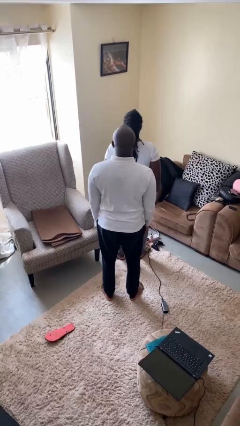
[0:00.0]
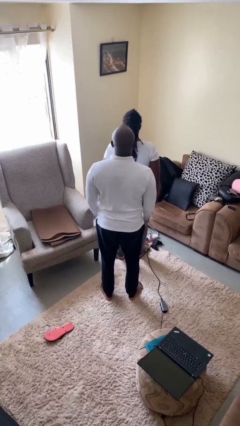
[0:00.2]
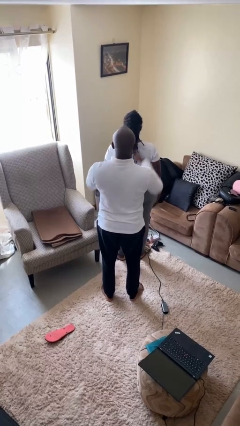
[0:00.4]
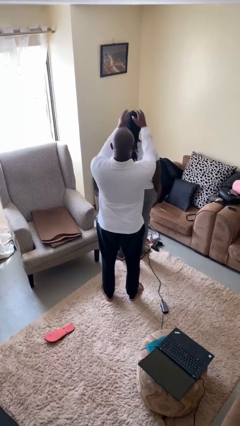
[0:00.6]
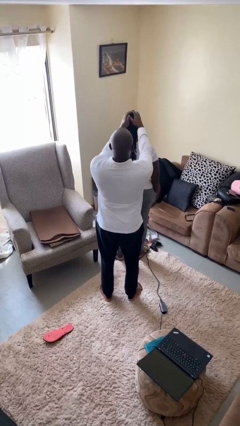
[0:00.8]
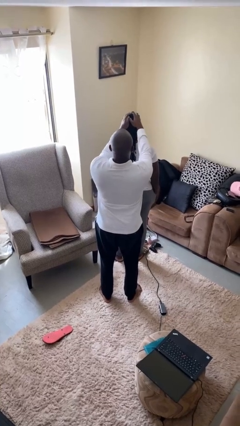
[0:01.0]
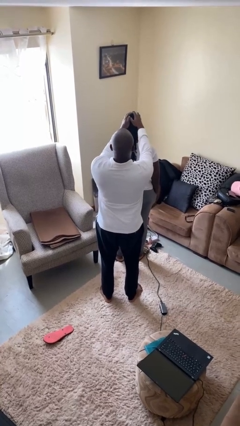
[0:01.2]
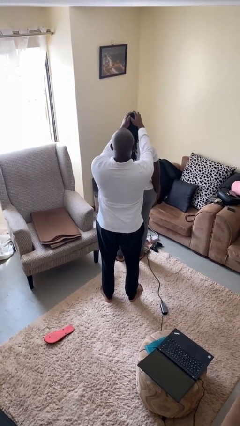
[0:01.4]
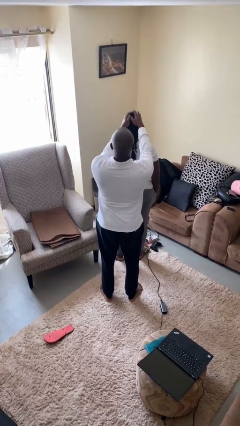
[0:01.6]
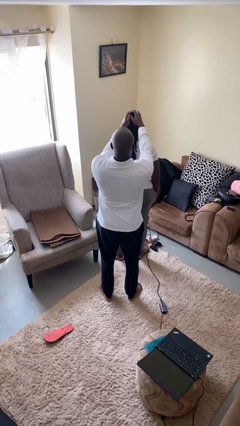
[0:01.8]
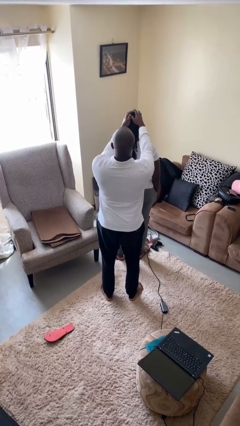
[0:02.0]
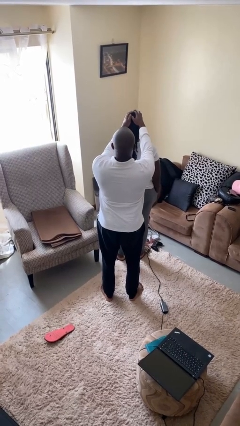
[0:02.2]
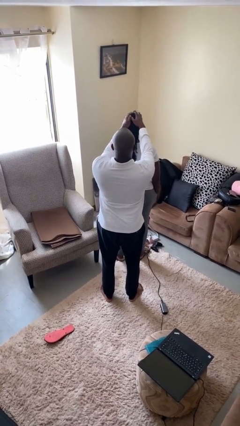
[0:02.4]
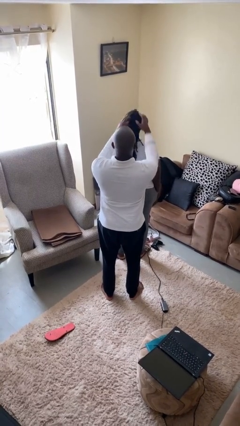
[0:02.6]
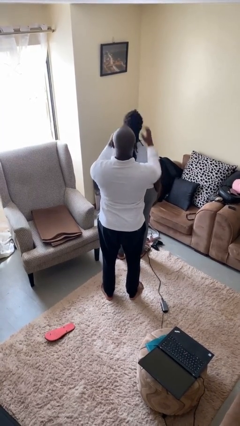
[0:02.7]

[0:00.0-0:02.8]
person grabs person by hair

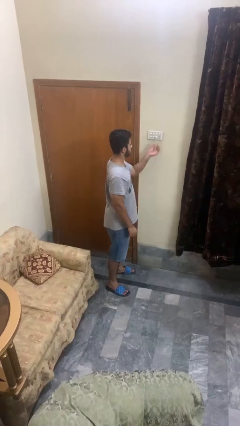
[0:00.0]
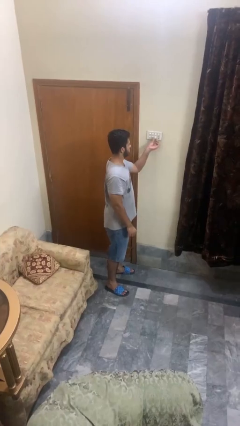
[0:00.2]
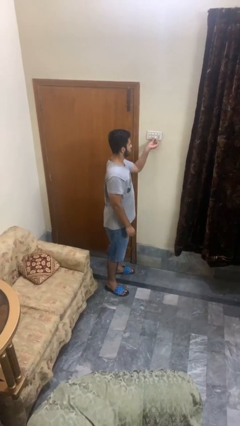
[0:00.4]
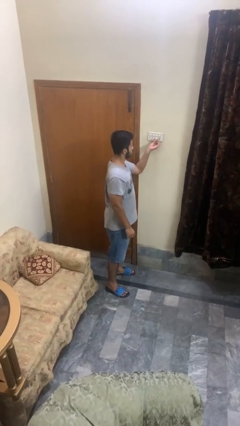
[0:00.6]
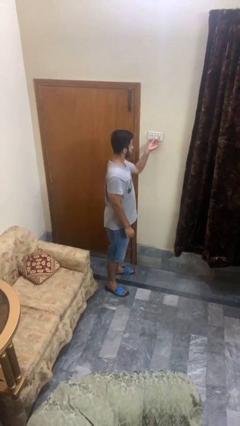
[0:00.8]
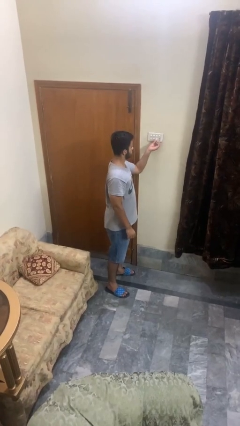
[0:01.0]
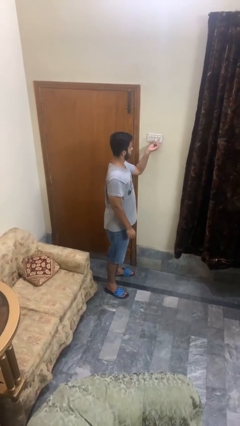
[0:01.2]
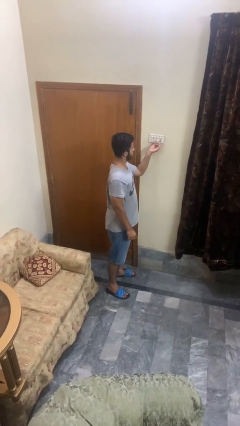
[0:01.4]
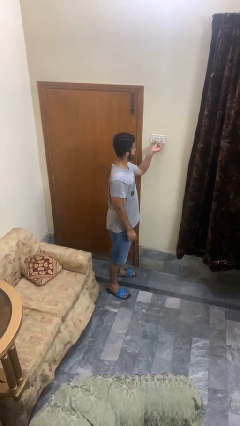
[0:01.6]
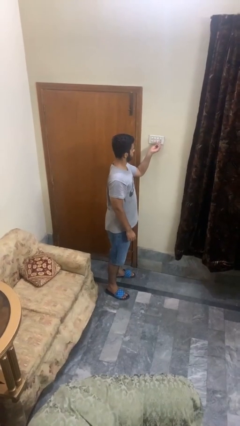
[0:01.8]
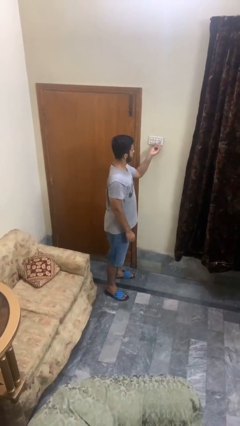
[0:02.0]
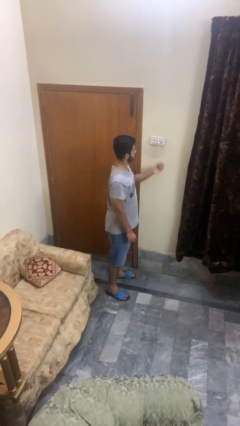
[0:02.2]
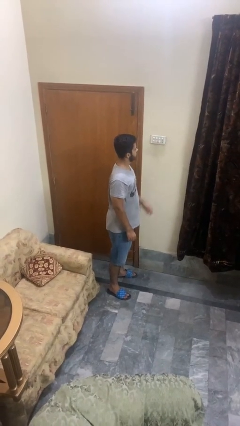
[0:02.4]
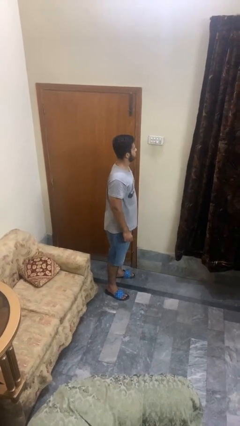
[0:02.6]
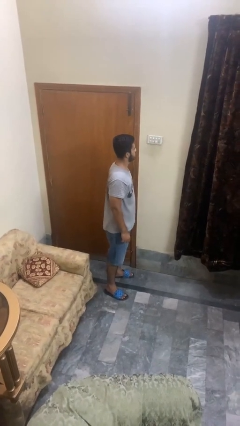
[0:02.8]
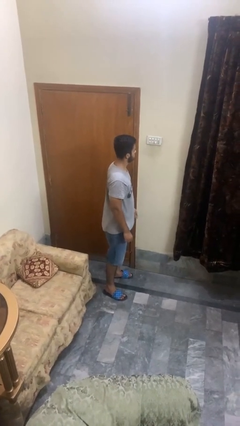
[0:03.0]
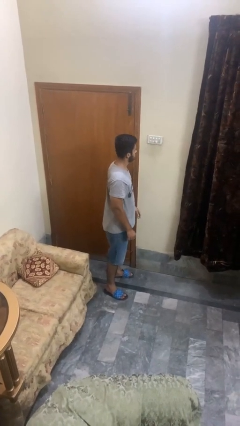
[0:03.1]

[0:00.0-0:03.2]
person adjusts thermostat

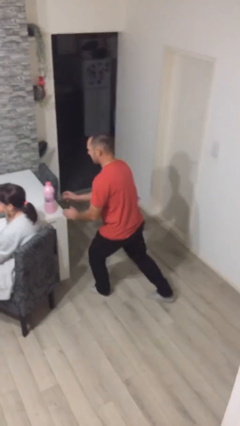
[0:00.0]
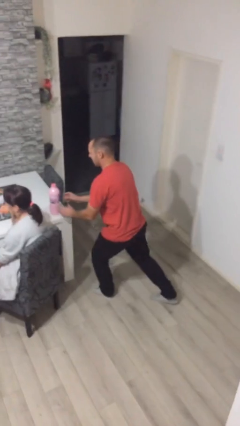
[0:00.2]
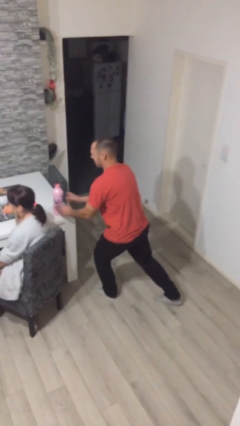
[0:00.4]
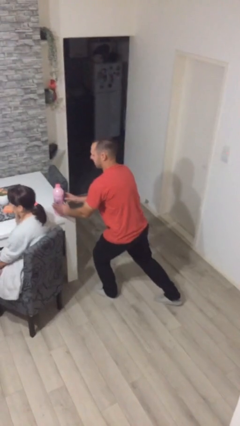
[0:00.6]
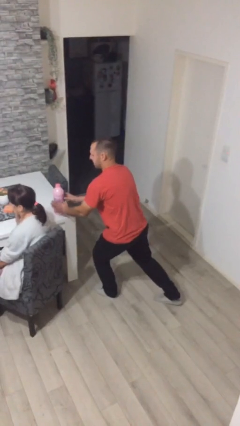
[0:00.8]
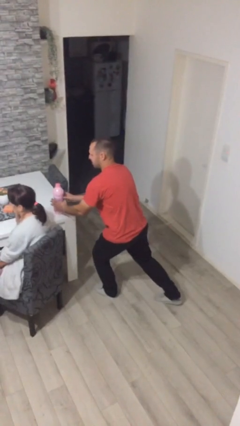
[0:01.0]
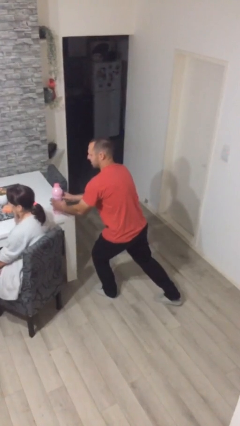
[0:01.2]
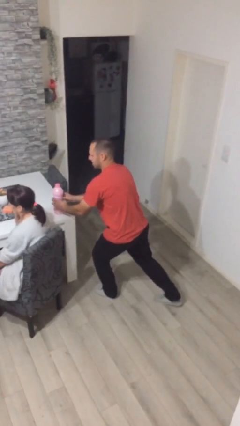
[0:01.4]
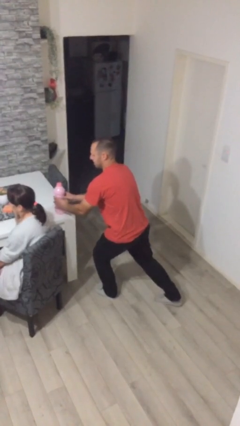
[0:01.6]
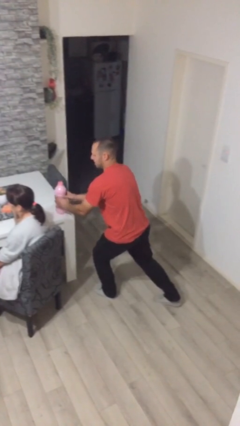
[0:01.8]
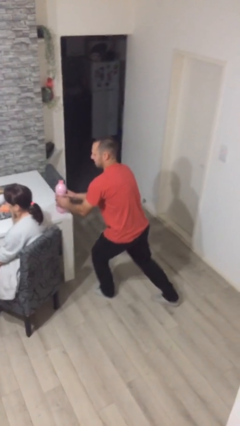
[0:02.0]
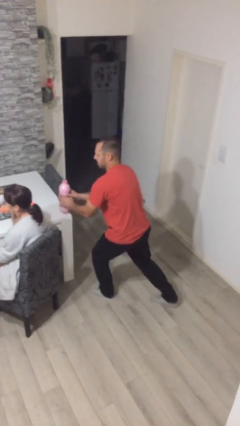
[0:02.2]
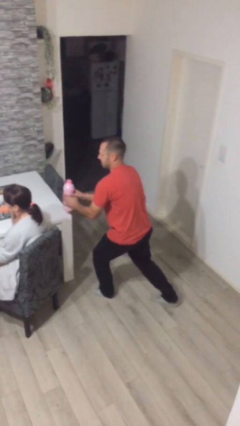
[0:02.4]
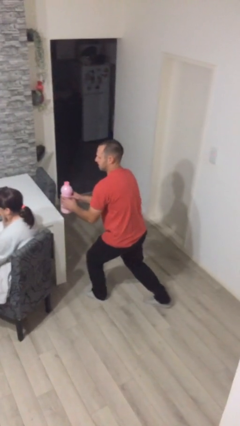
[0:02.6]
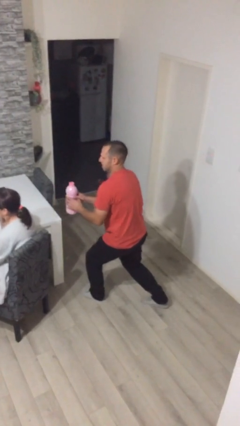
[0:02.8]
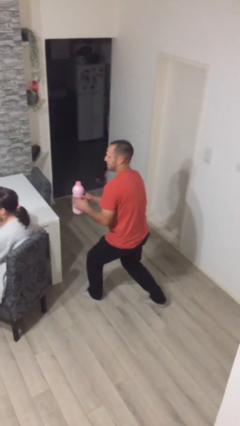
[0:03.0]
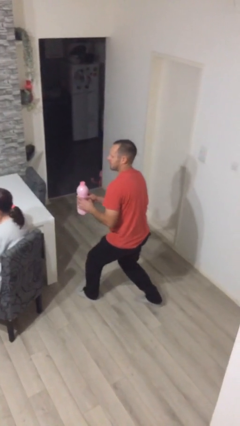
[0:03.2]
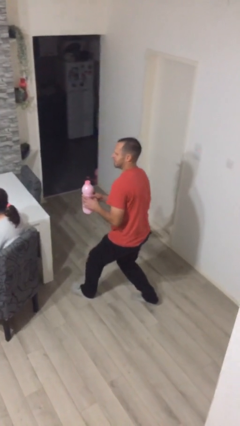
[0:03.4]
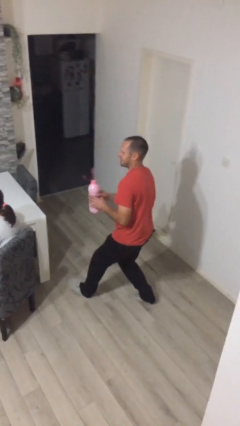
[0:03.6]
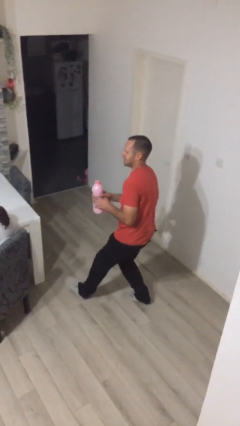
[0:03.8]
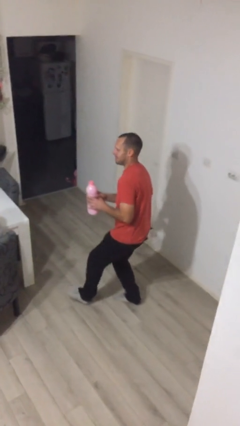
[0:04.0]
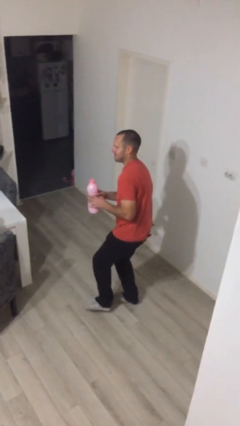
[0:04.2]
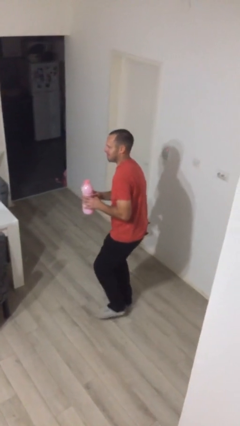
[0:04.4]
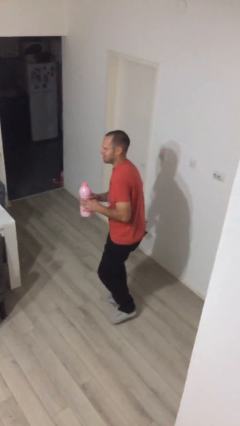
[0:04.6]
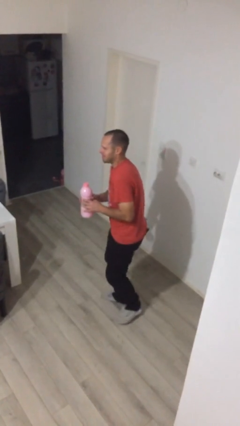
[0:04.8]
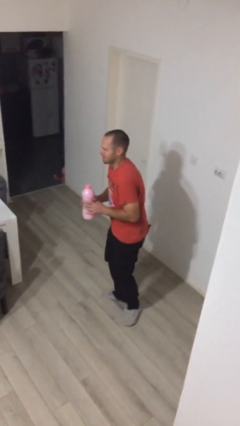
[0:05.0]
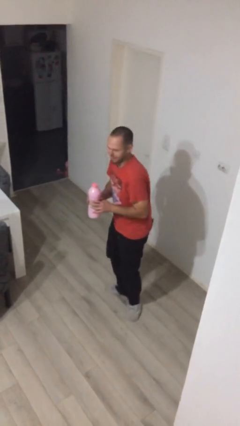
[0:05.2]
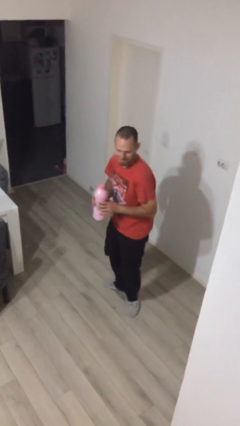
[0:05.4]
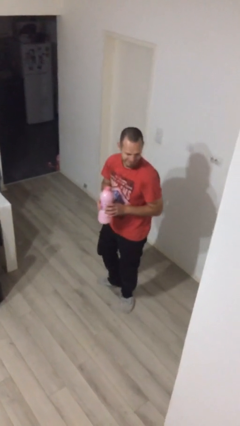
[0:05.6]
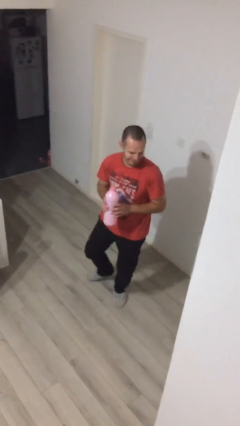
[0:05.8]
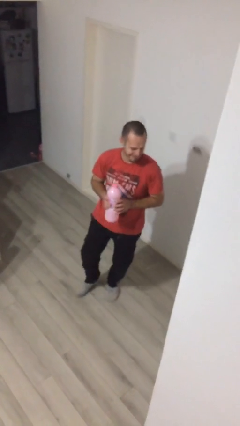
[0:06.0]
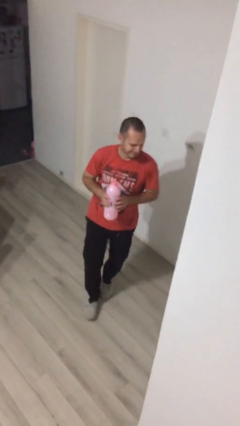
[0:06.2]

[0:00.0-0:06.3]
person steals object from person

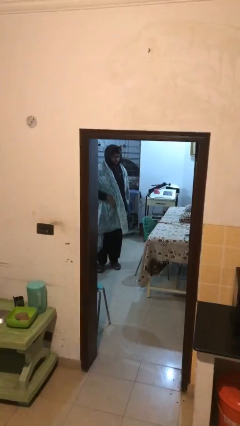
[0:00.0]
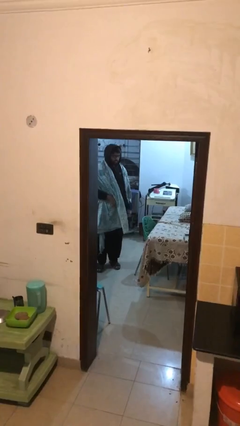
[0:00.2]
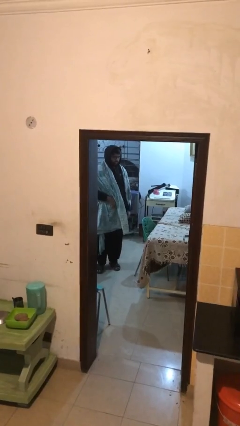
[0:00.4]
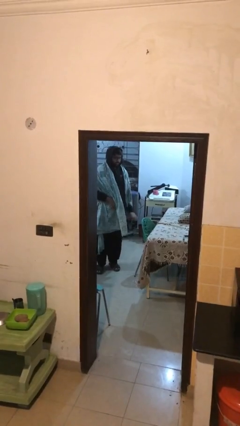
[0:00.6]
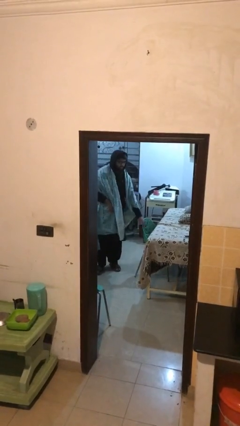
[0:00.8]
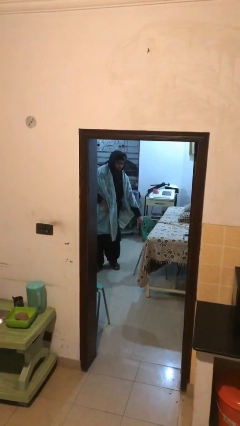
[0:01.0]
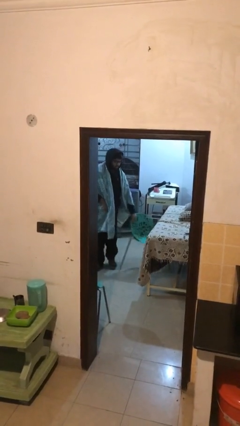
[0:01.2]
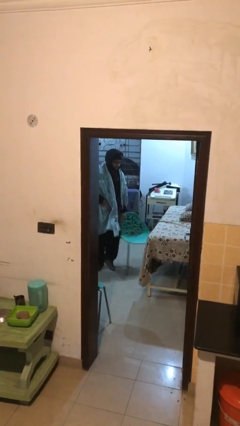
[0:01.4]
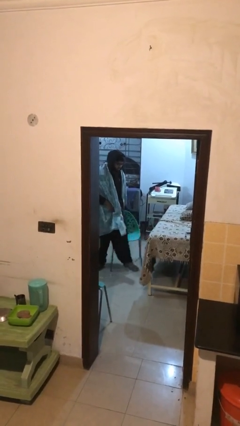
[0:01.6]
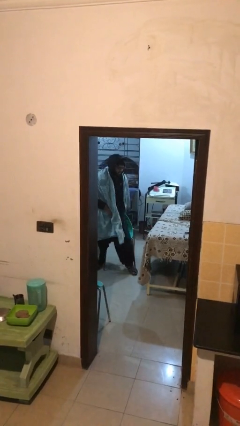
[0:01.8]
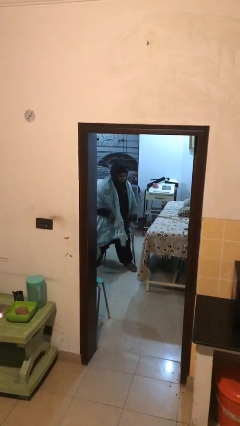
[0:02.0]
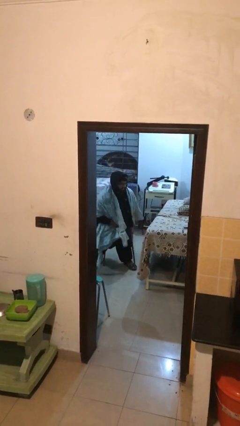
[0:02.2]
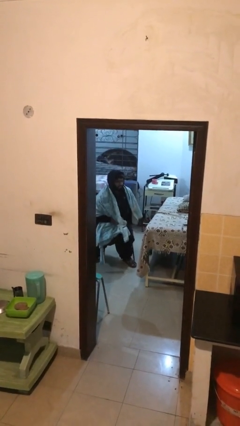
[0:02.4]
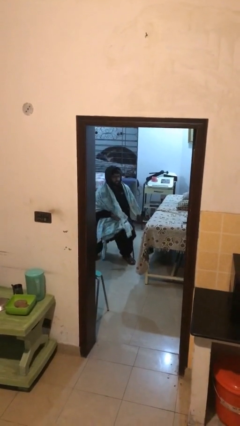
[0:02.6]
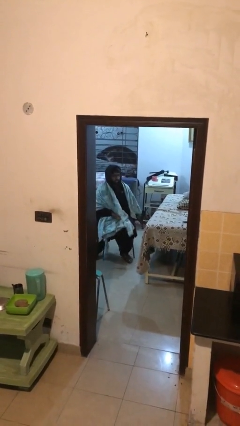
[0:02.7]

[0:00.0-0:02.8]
person sits down

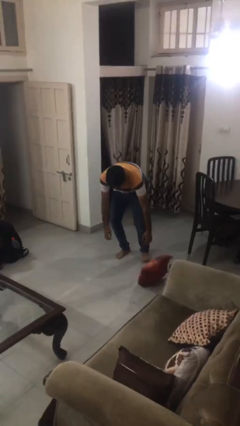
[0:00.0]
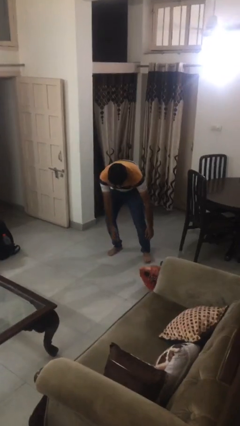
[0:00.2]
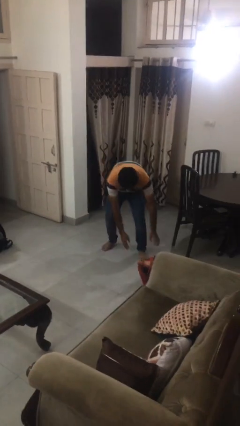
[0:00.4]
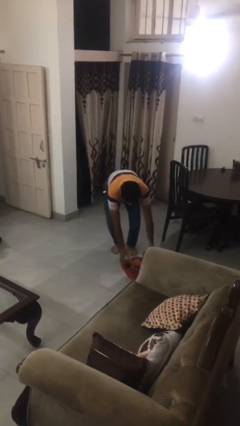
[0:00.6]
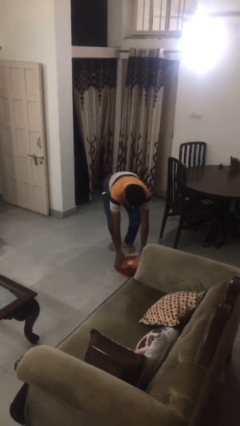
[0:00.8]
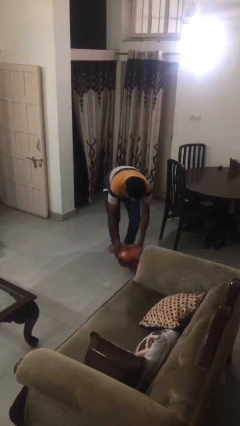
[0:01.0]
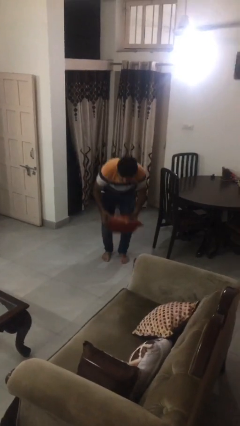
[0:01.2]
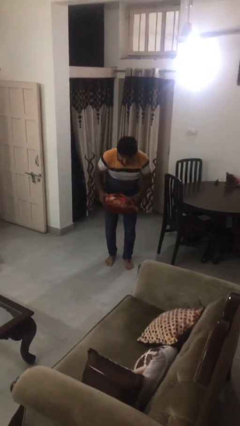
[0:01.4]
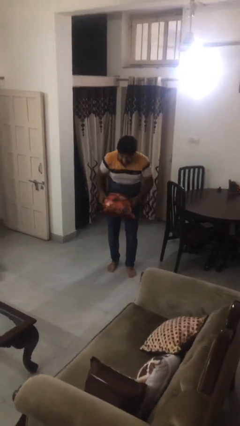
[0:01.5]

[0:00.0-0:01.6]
person picks up object from floor

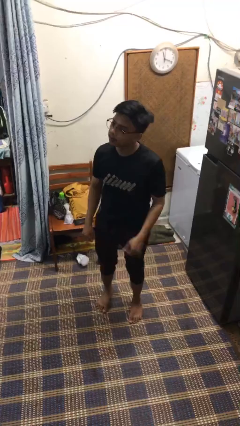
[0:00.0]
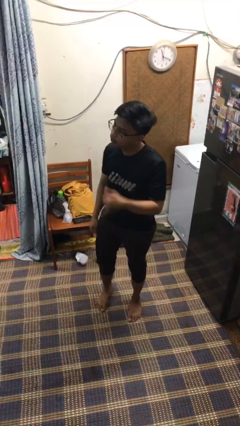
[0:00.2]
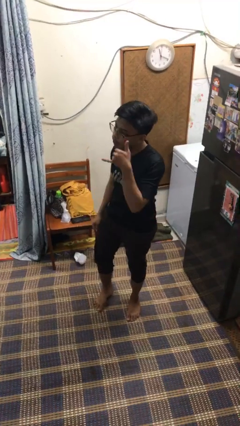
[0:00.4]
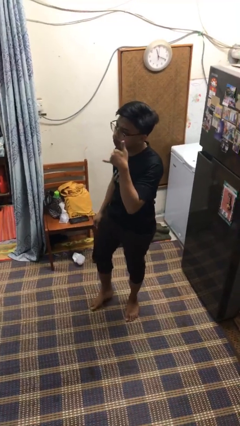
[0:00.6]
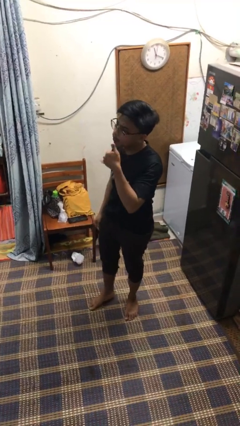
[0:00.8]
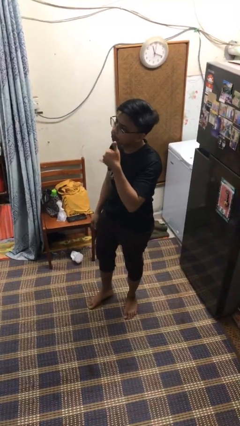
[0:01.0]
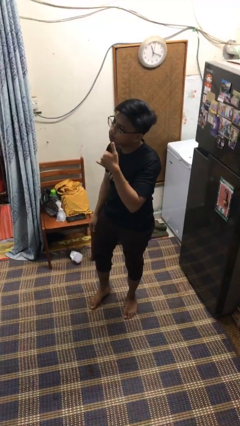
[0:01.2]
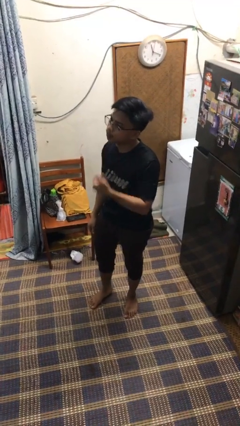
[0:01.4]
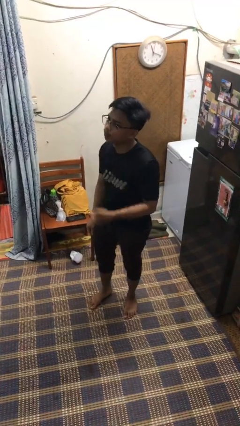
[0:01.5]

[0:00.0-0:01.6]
person gestures hang loose
